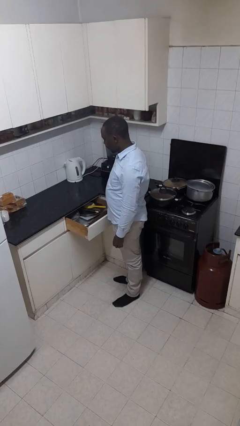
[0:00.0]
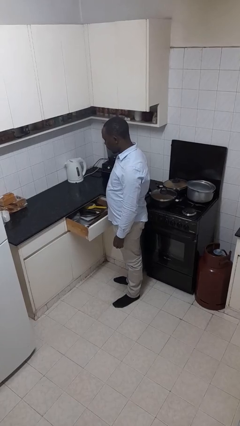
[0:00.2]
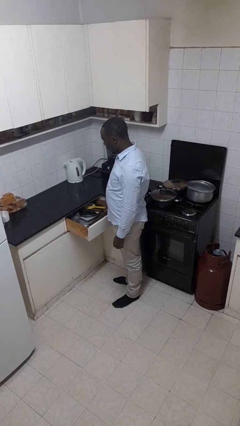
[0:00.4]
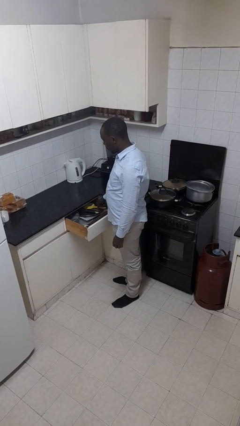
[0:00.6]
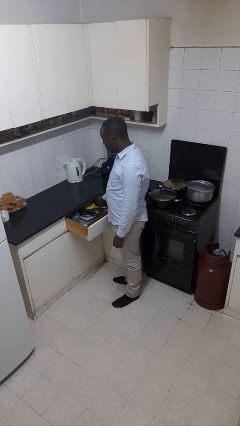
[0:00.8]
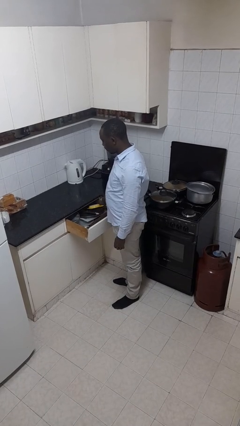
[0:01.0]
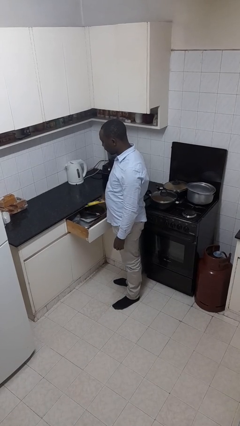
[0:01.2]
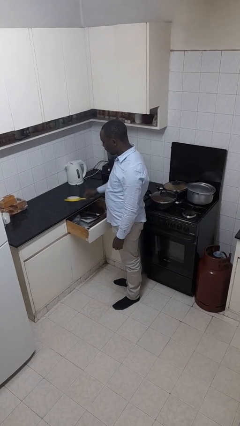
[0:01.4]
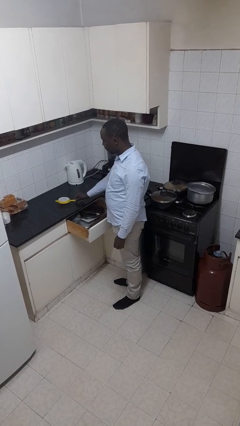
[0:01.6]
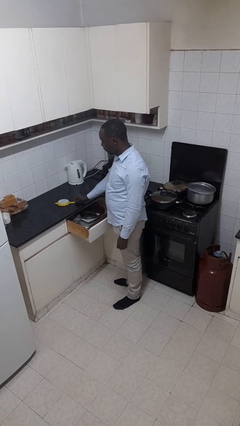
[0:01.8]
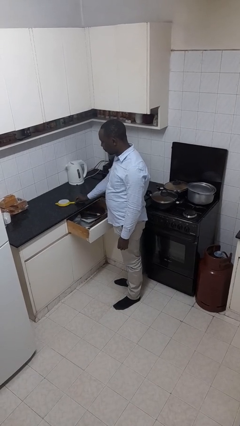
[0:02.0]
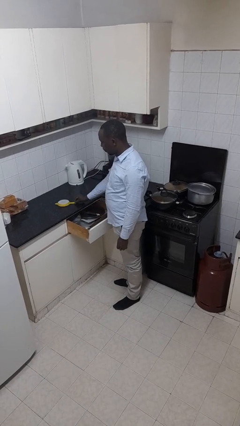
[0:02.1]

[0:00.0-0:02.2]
person takes object from kitchen drawer

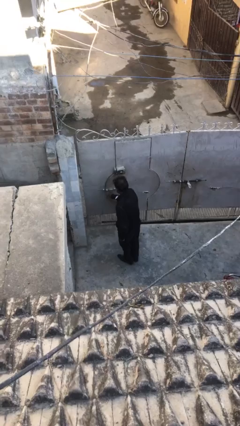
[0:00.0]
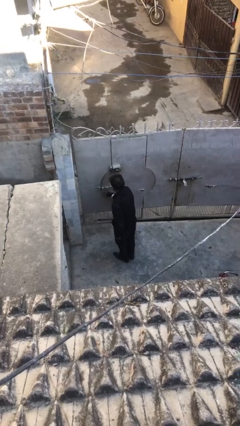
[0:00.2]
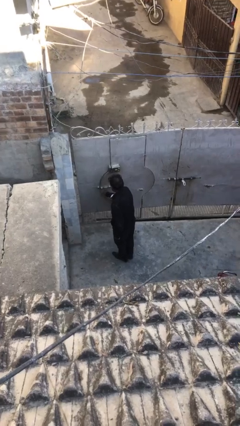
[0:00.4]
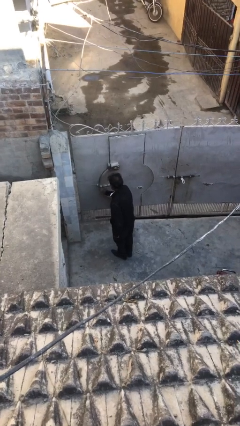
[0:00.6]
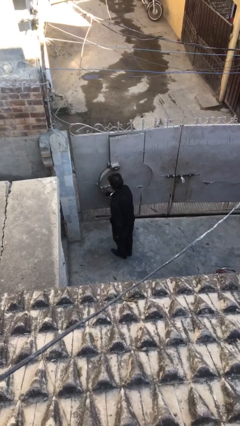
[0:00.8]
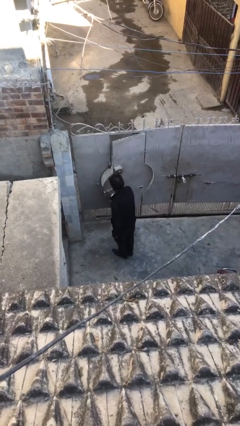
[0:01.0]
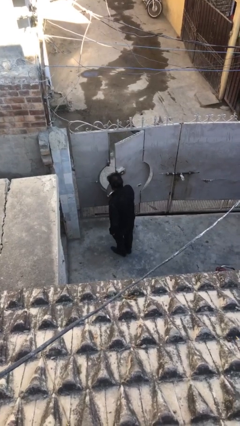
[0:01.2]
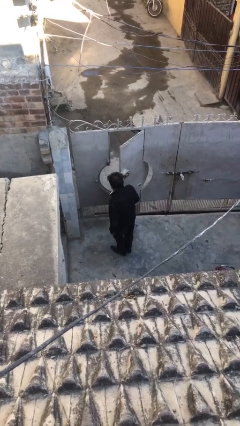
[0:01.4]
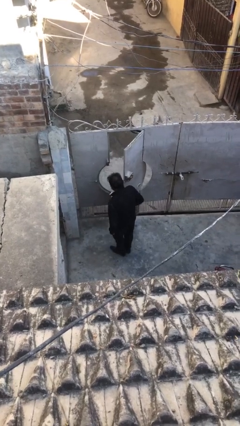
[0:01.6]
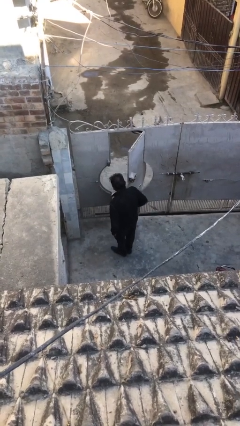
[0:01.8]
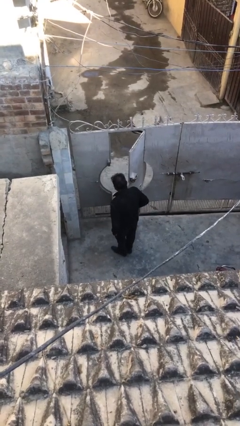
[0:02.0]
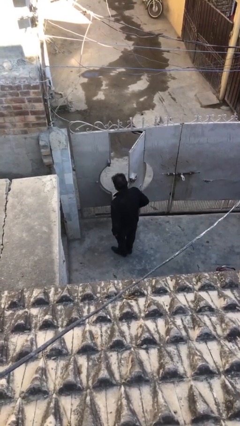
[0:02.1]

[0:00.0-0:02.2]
person opens facility door

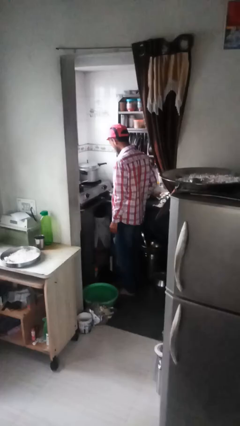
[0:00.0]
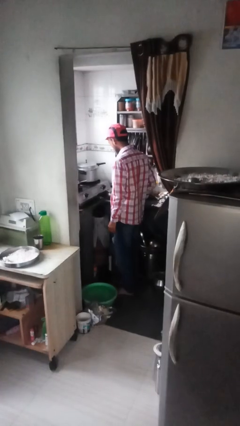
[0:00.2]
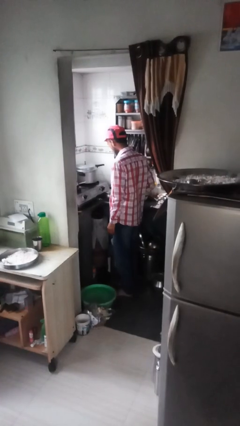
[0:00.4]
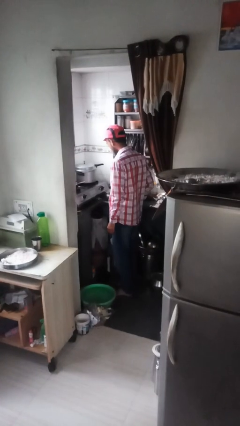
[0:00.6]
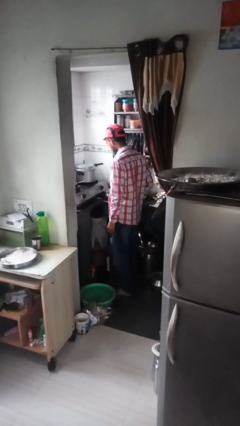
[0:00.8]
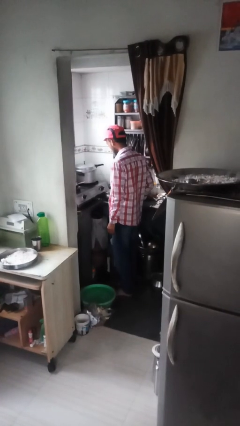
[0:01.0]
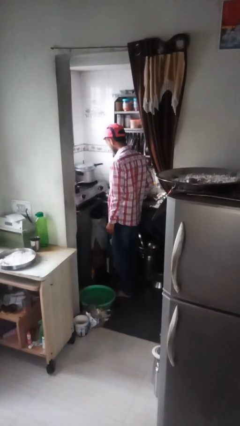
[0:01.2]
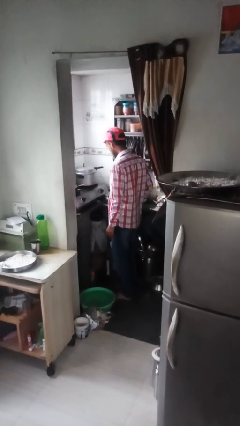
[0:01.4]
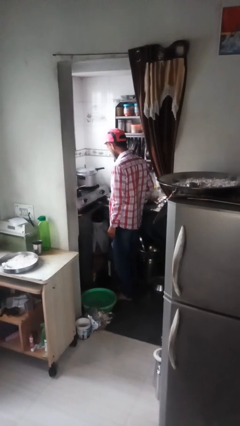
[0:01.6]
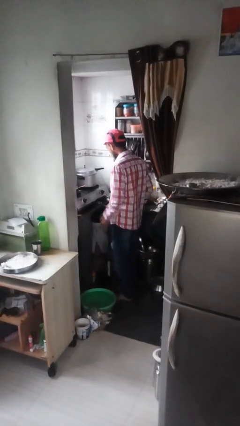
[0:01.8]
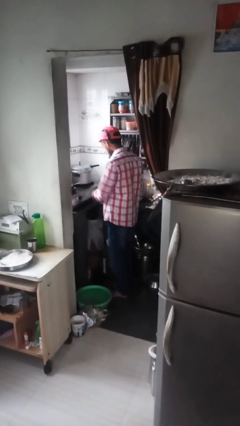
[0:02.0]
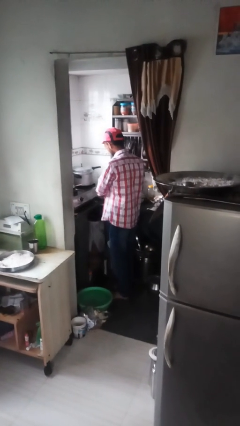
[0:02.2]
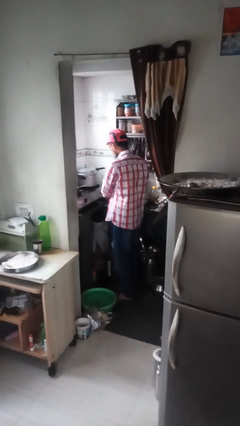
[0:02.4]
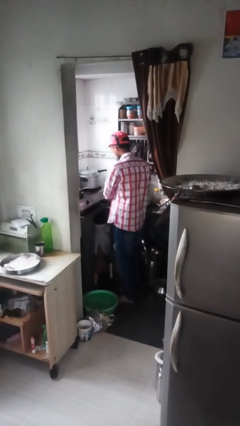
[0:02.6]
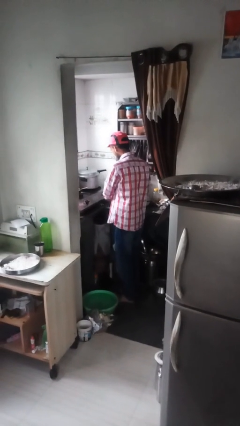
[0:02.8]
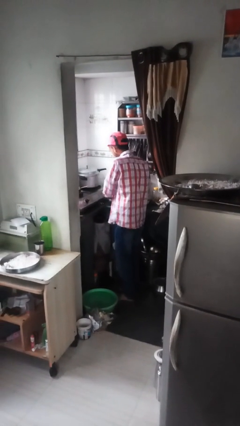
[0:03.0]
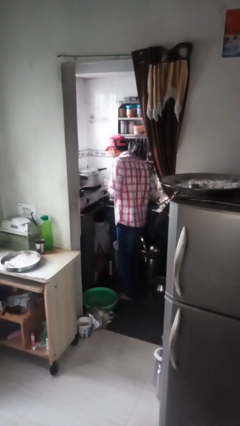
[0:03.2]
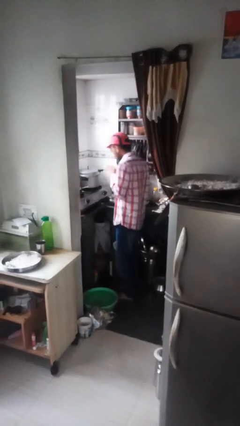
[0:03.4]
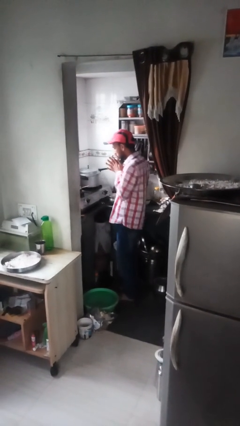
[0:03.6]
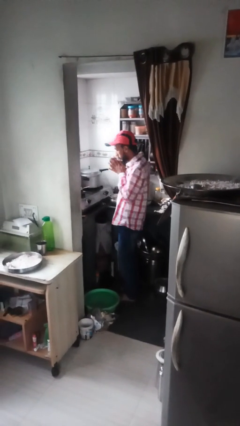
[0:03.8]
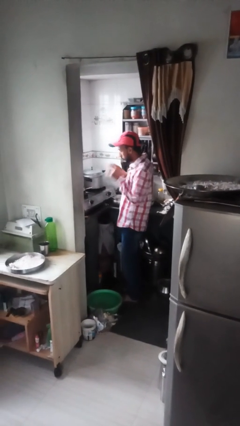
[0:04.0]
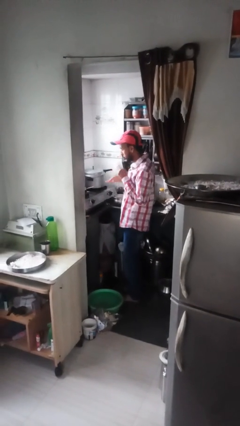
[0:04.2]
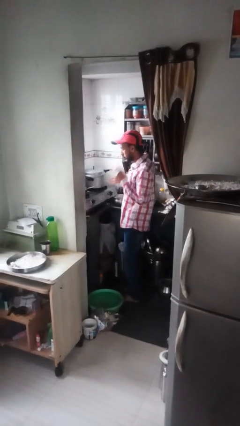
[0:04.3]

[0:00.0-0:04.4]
person burns hand

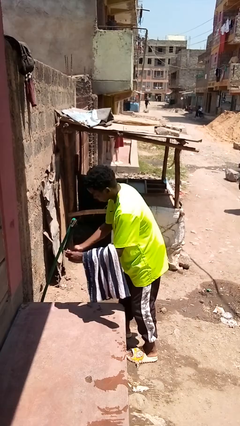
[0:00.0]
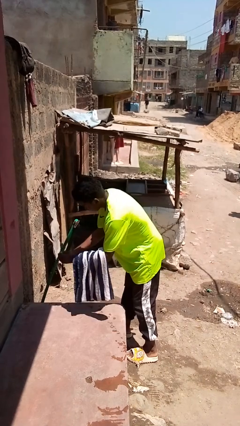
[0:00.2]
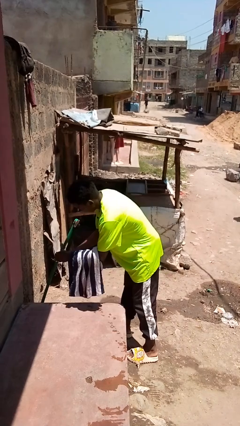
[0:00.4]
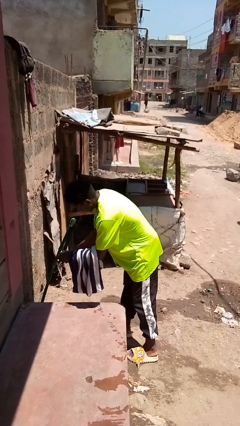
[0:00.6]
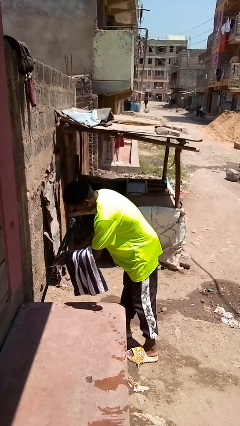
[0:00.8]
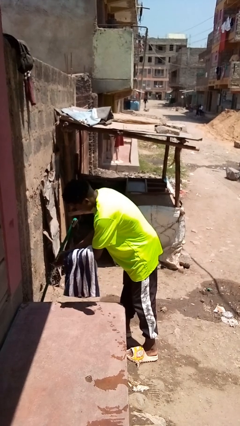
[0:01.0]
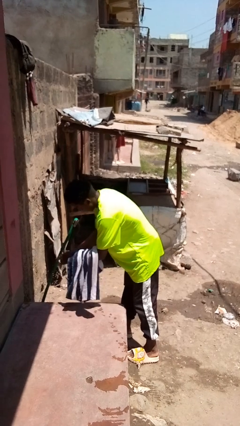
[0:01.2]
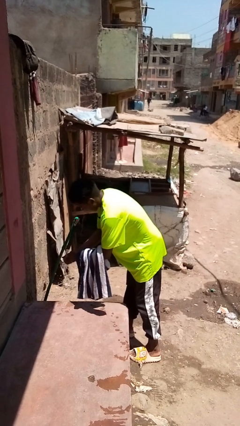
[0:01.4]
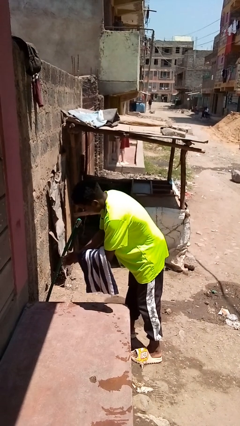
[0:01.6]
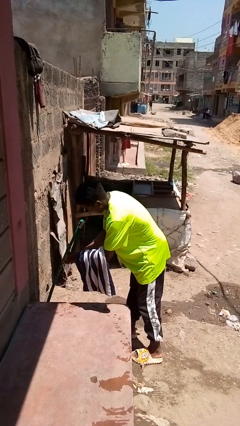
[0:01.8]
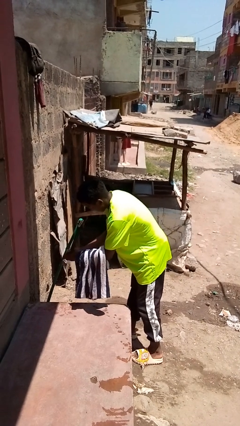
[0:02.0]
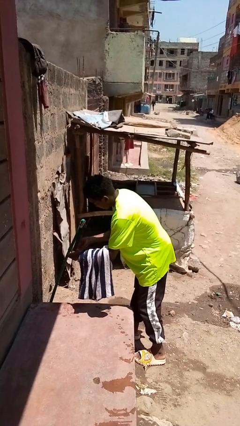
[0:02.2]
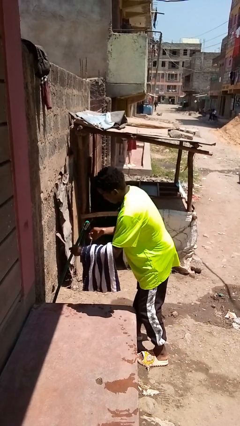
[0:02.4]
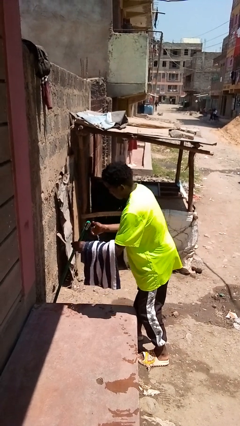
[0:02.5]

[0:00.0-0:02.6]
person washes hands

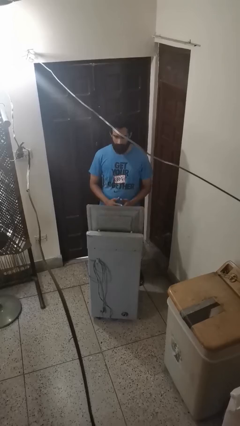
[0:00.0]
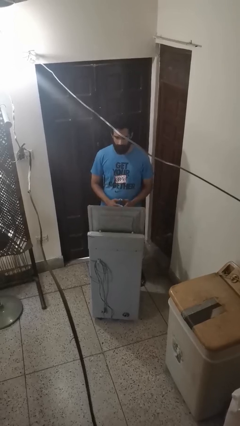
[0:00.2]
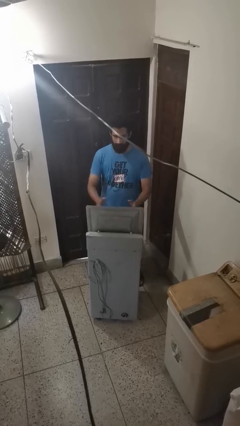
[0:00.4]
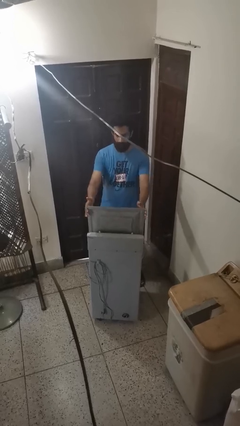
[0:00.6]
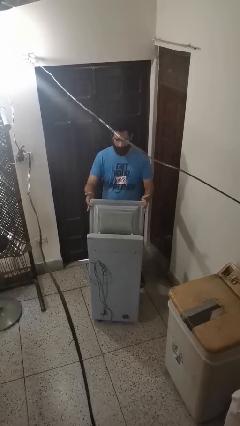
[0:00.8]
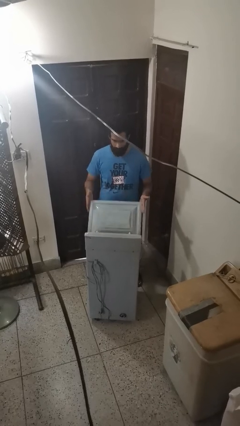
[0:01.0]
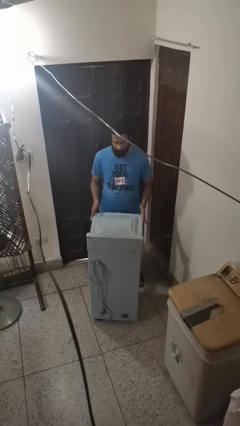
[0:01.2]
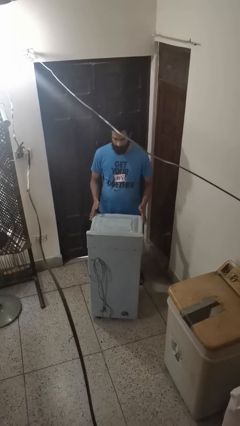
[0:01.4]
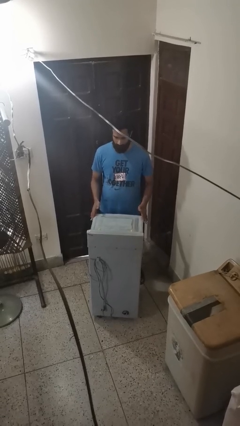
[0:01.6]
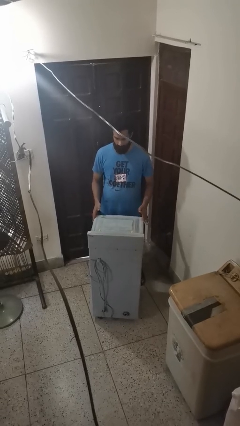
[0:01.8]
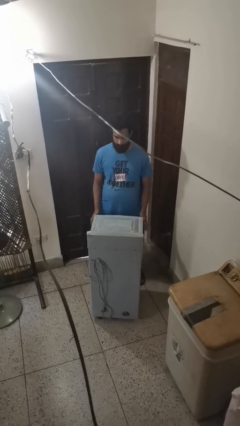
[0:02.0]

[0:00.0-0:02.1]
person closes clothes washer

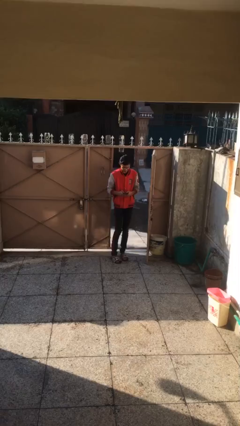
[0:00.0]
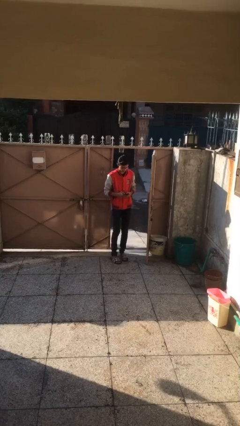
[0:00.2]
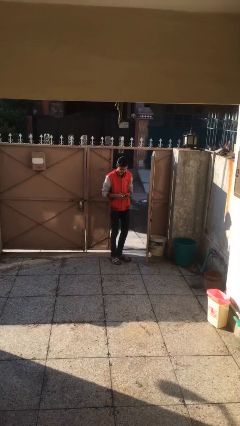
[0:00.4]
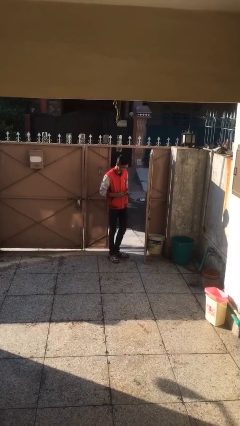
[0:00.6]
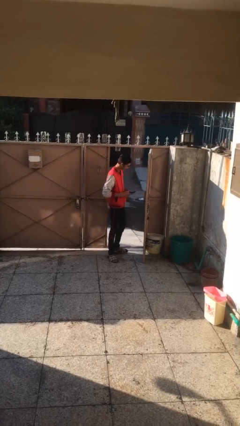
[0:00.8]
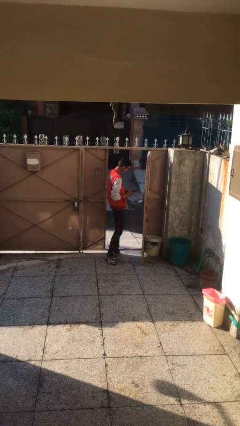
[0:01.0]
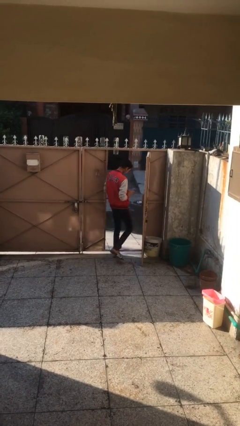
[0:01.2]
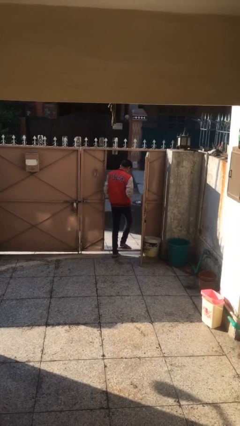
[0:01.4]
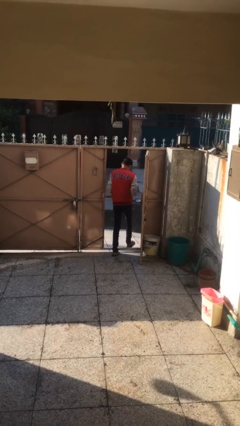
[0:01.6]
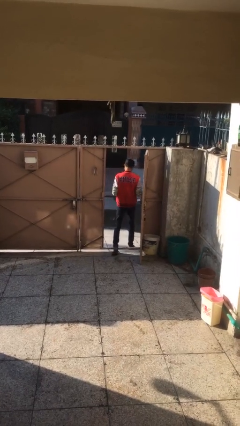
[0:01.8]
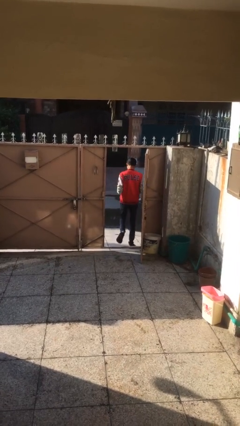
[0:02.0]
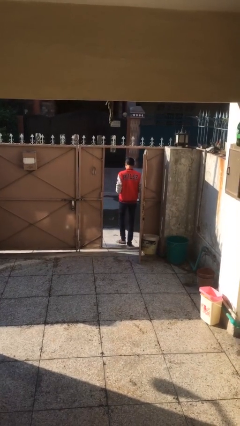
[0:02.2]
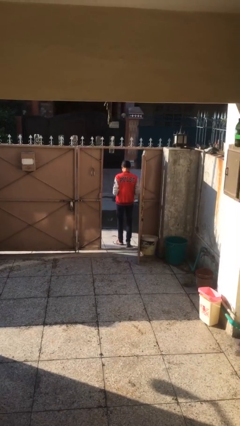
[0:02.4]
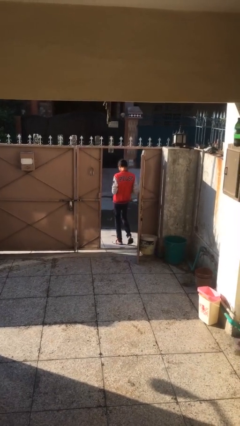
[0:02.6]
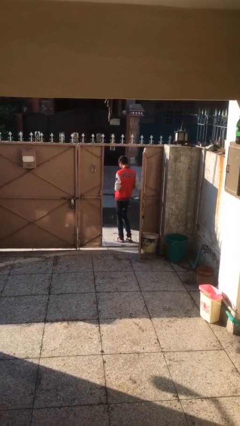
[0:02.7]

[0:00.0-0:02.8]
person exits scene through structure

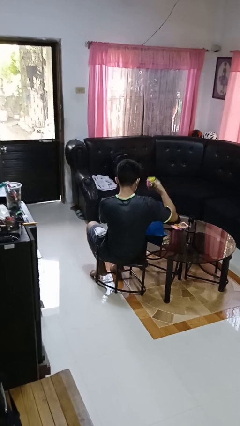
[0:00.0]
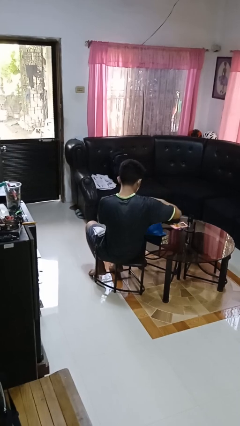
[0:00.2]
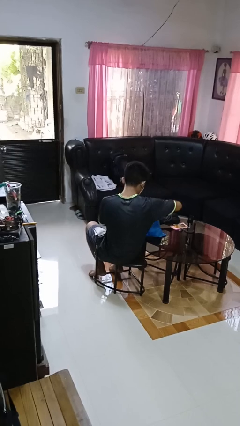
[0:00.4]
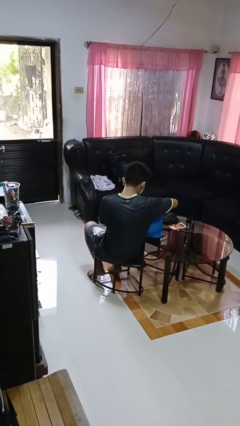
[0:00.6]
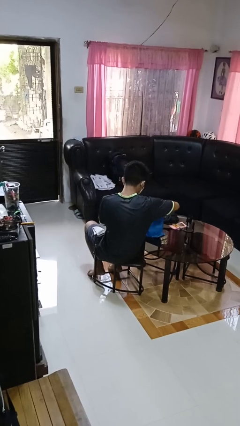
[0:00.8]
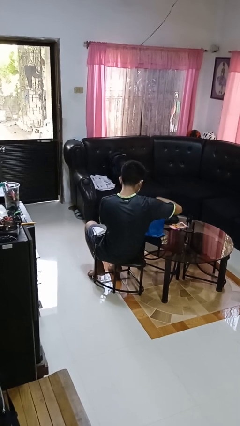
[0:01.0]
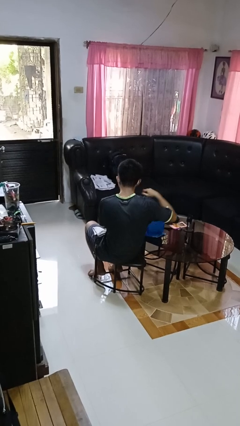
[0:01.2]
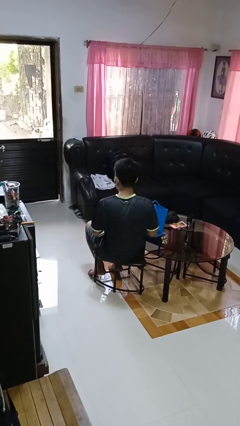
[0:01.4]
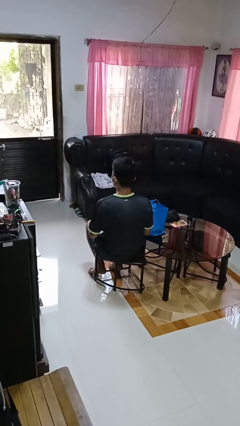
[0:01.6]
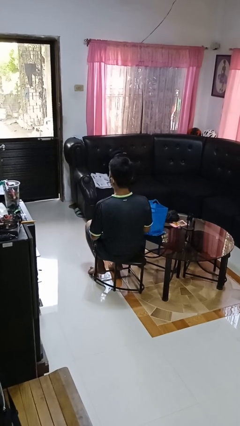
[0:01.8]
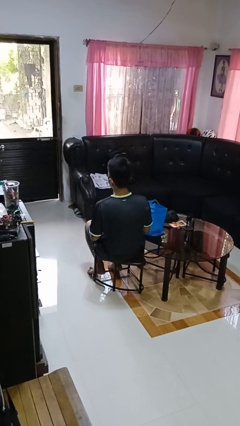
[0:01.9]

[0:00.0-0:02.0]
person puts object into bag
